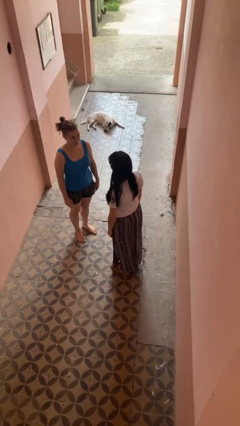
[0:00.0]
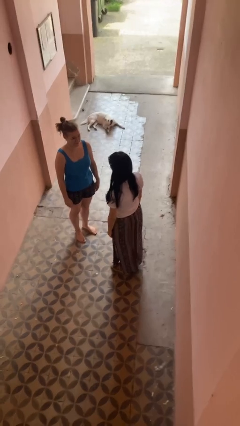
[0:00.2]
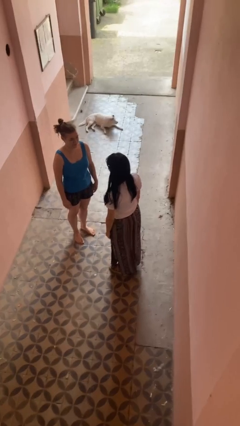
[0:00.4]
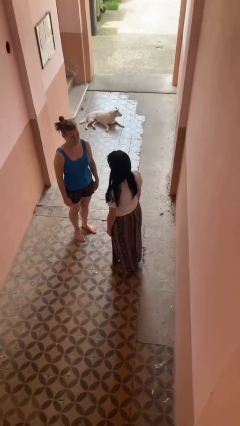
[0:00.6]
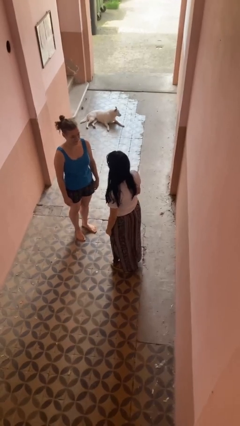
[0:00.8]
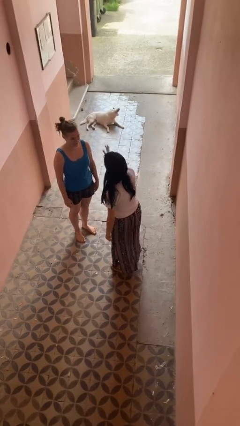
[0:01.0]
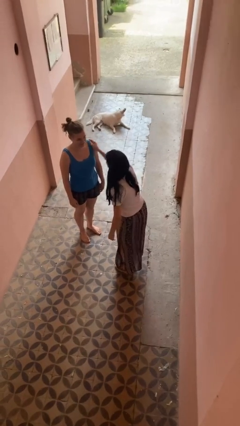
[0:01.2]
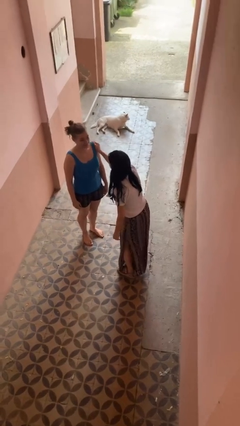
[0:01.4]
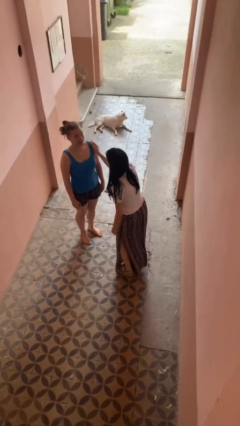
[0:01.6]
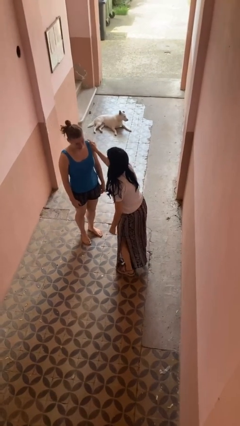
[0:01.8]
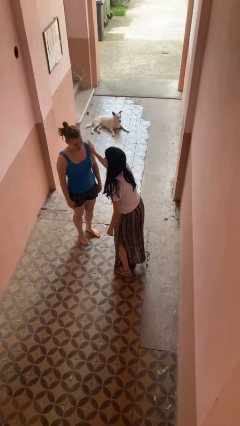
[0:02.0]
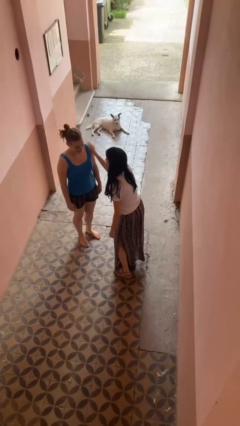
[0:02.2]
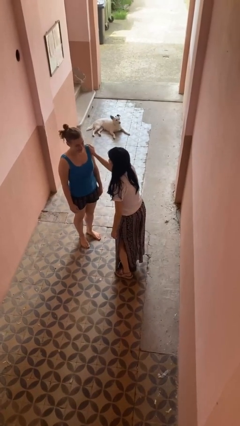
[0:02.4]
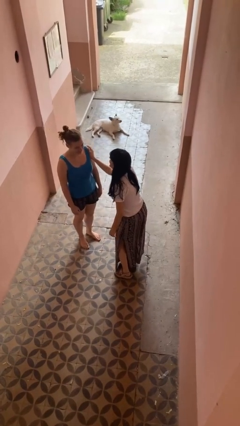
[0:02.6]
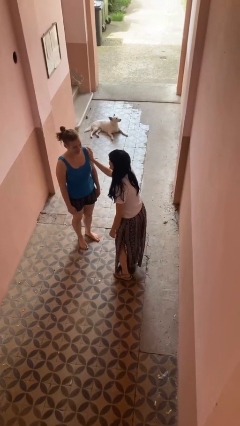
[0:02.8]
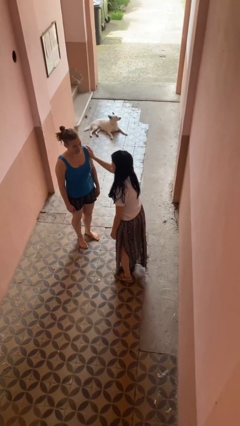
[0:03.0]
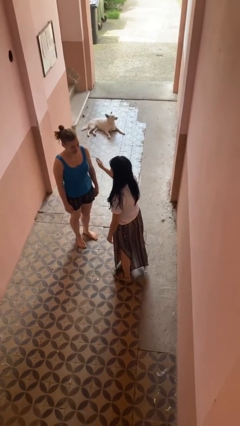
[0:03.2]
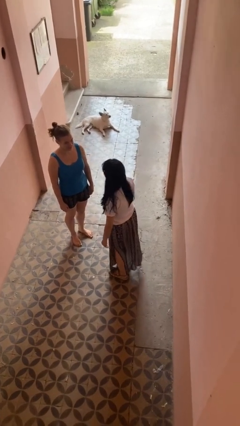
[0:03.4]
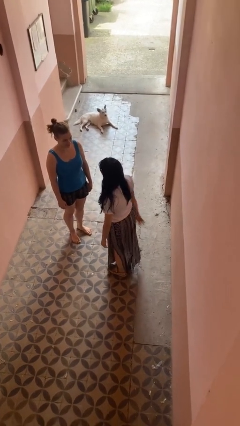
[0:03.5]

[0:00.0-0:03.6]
person pounds shoulders of person

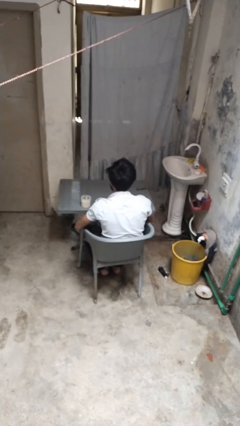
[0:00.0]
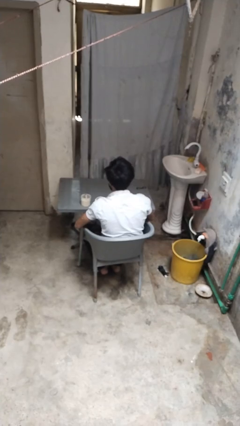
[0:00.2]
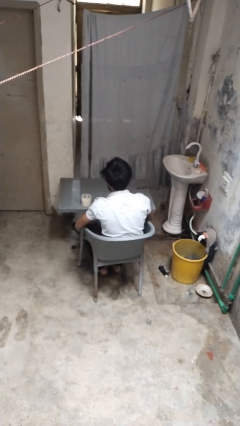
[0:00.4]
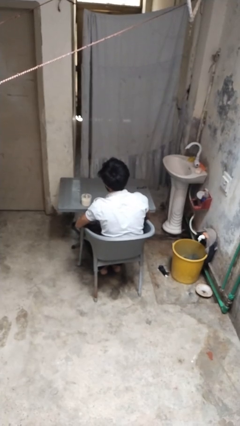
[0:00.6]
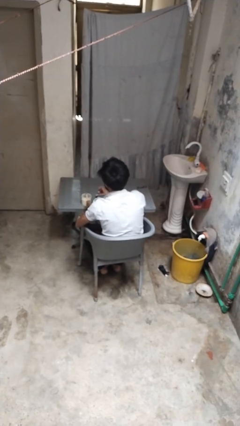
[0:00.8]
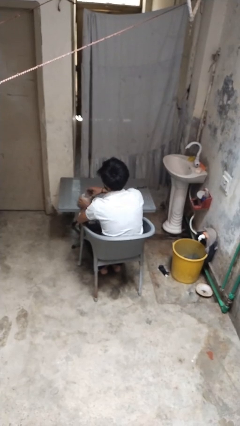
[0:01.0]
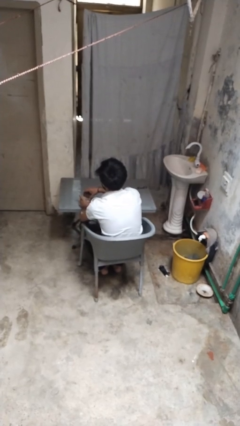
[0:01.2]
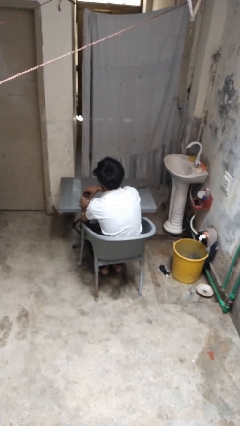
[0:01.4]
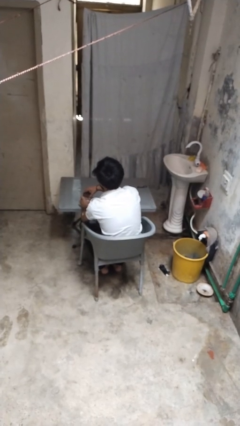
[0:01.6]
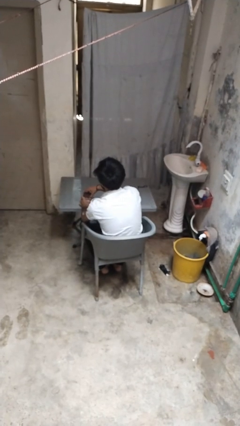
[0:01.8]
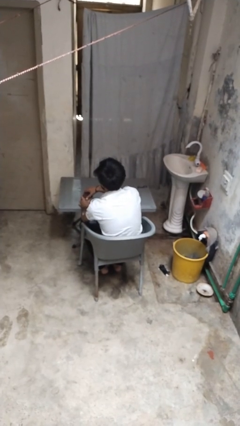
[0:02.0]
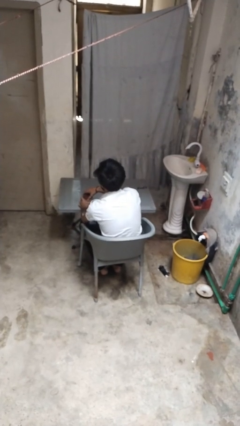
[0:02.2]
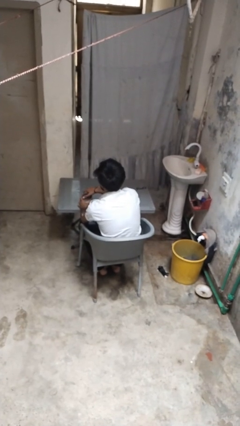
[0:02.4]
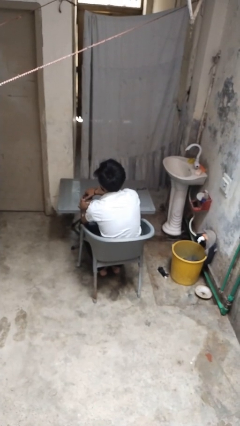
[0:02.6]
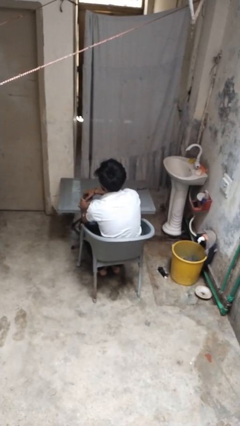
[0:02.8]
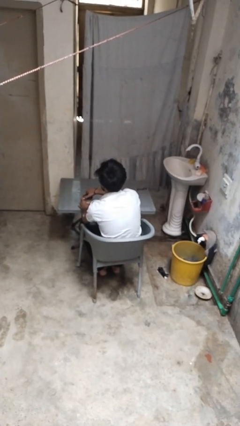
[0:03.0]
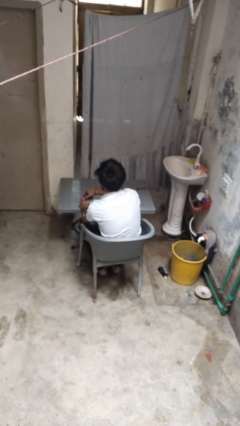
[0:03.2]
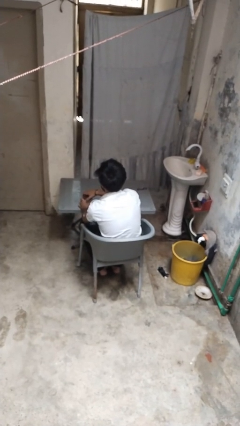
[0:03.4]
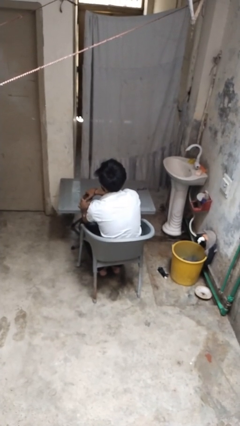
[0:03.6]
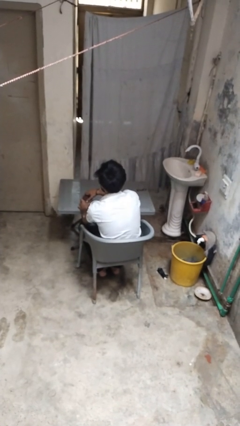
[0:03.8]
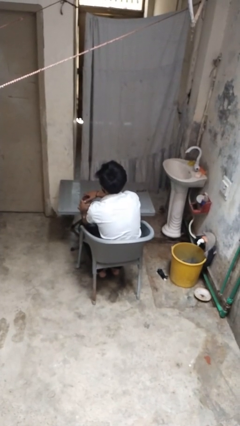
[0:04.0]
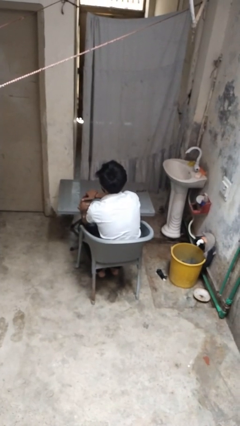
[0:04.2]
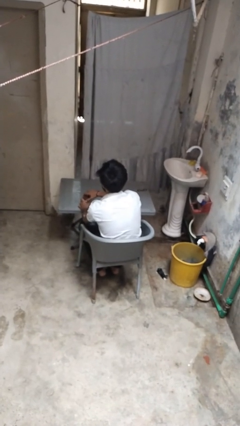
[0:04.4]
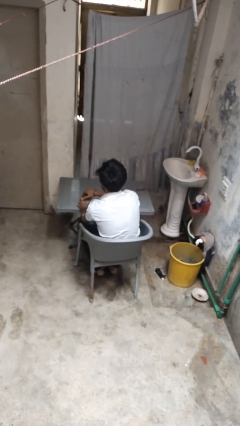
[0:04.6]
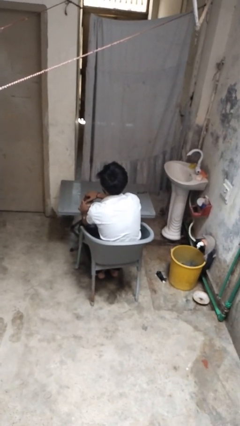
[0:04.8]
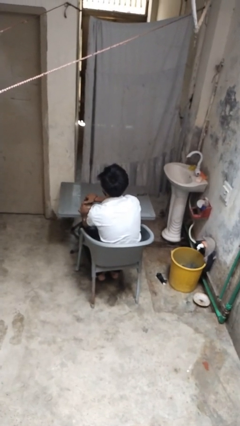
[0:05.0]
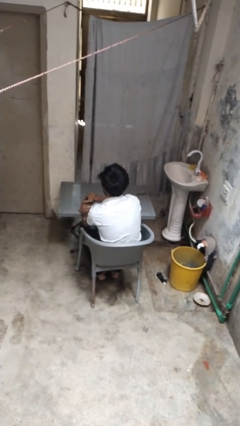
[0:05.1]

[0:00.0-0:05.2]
person closes jar

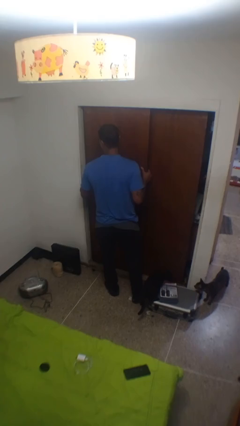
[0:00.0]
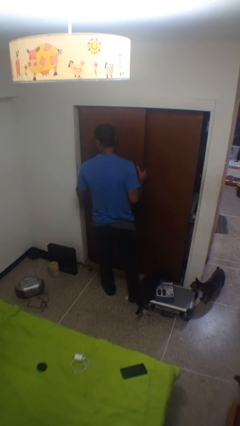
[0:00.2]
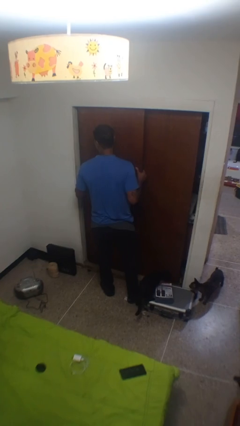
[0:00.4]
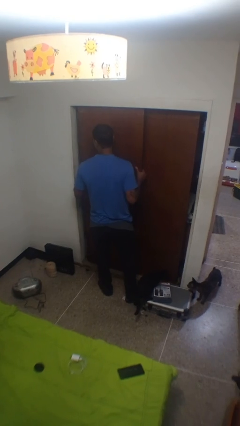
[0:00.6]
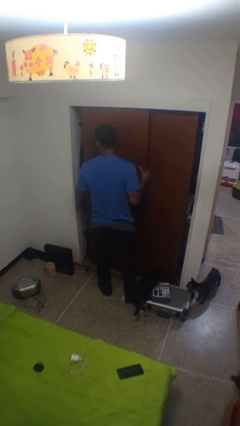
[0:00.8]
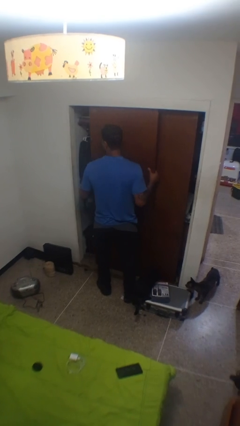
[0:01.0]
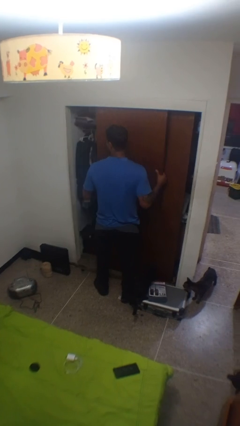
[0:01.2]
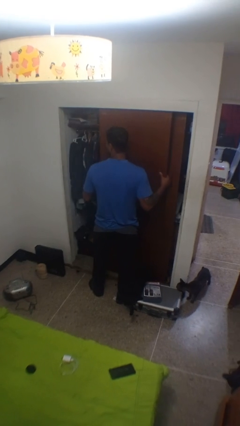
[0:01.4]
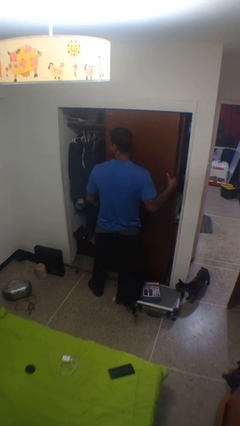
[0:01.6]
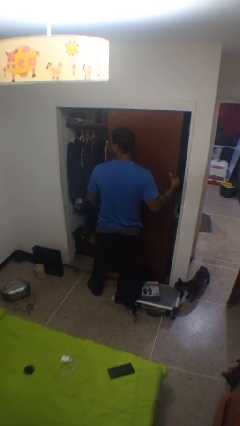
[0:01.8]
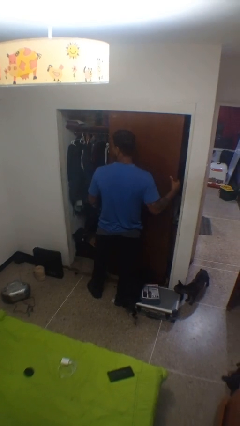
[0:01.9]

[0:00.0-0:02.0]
person opens closet door

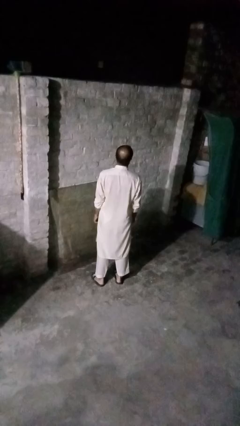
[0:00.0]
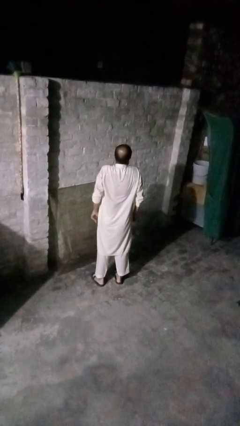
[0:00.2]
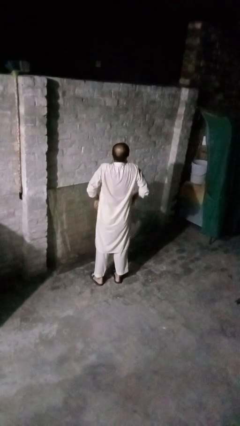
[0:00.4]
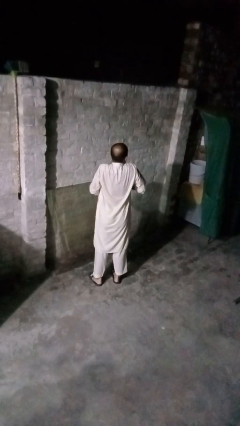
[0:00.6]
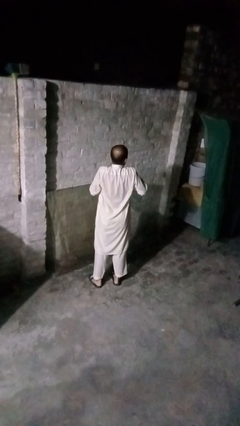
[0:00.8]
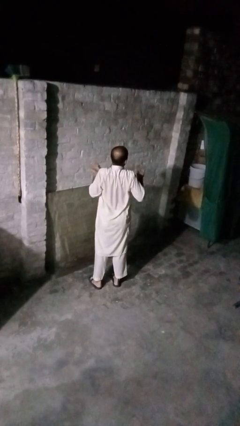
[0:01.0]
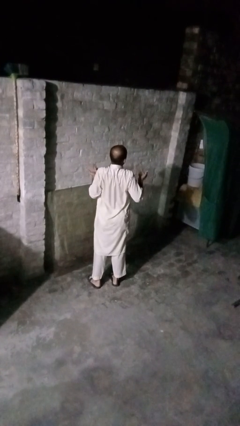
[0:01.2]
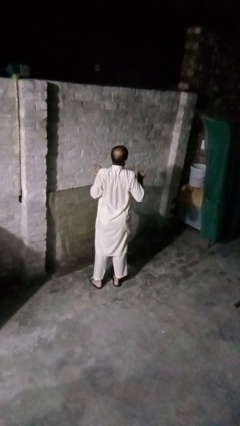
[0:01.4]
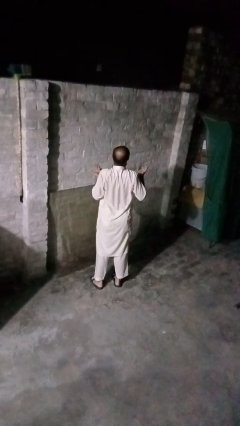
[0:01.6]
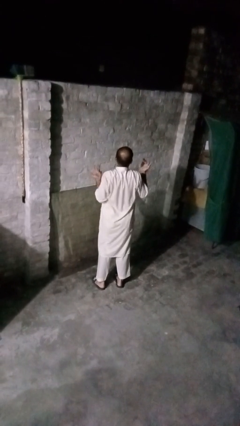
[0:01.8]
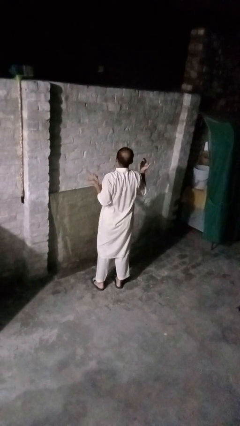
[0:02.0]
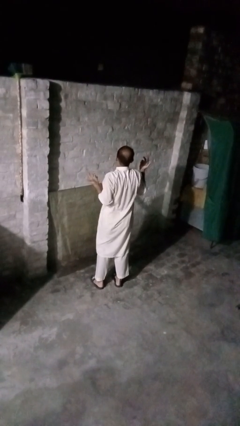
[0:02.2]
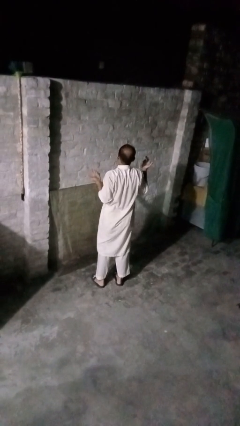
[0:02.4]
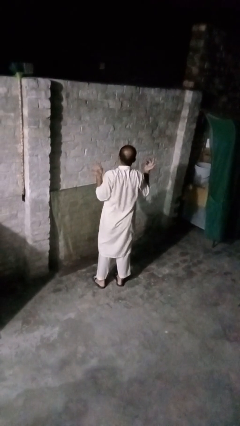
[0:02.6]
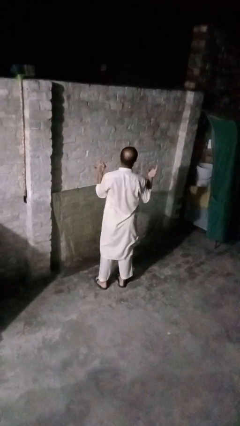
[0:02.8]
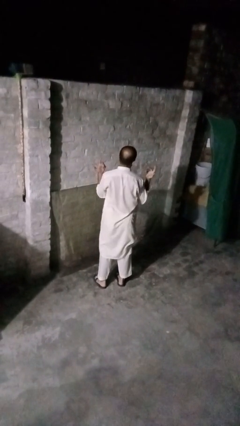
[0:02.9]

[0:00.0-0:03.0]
person shrugs

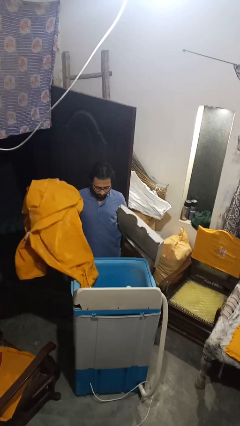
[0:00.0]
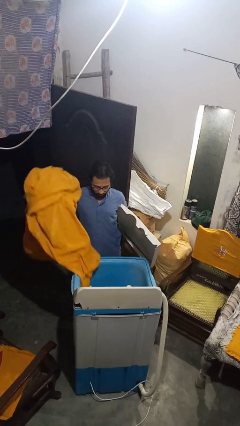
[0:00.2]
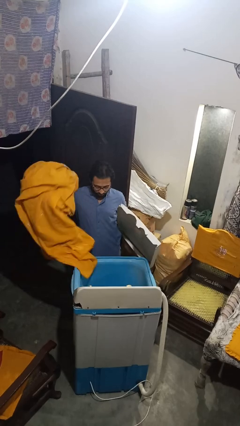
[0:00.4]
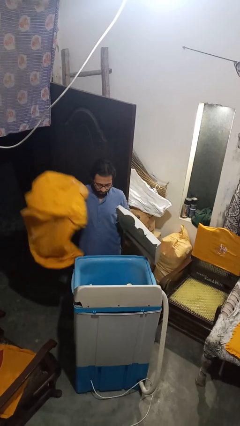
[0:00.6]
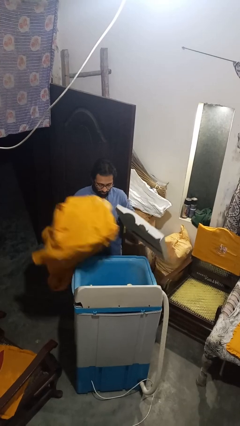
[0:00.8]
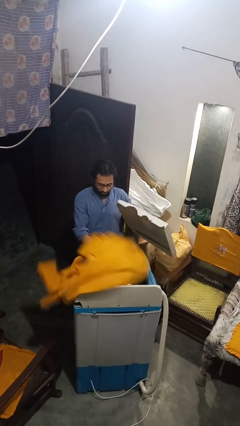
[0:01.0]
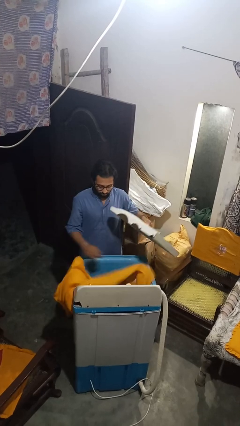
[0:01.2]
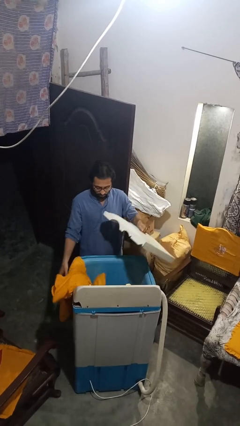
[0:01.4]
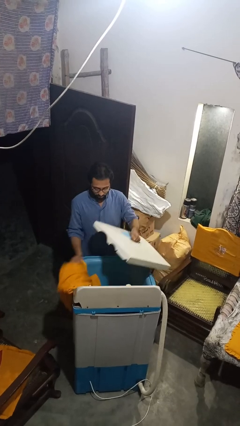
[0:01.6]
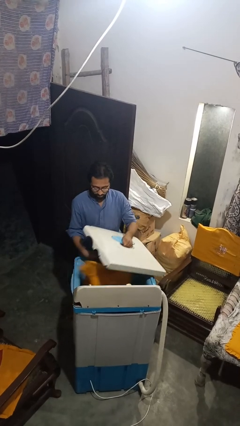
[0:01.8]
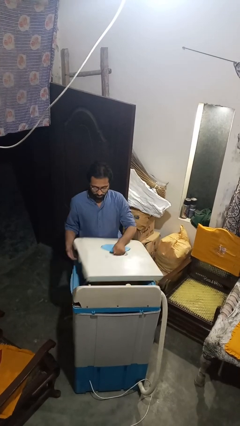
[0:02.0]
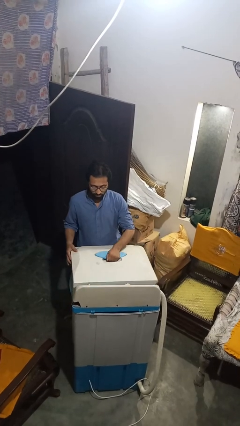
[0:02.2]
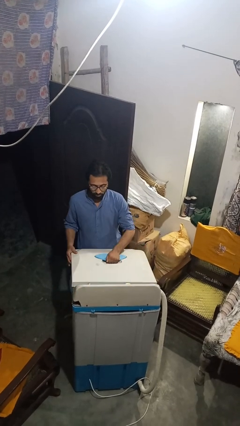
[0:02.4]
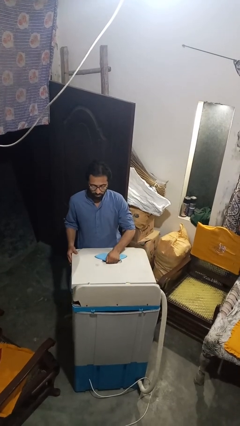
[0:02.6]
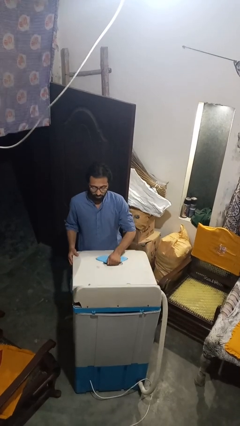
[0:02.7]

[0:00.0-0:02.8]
person closes clothes washer

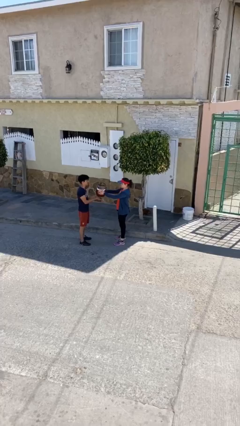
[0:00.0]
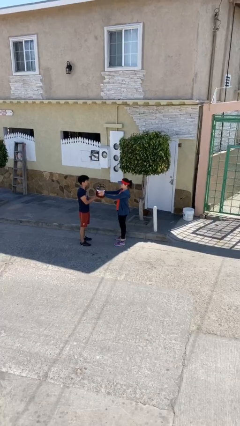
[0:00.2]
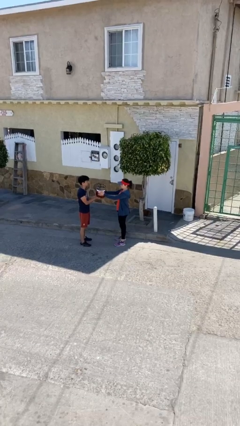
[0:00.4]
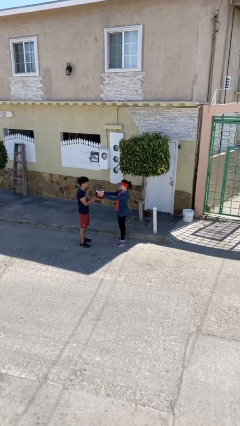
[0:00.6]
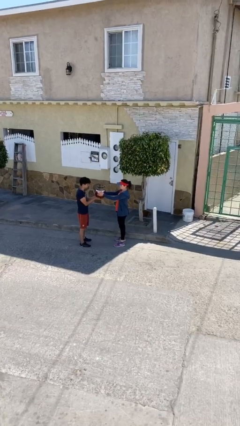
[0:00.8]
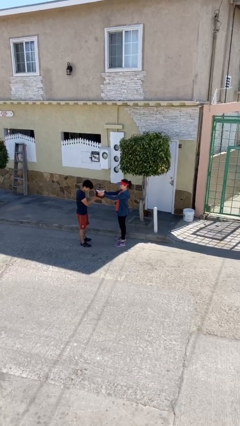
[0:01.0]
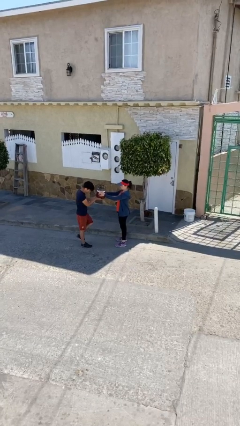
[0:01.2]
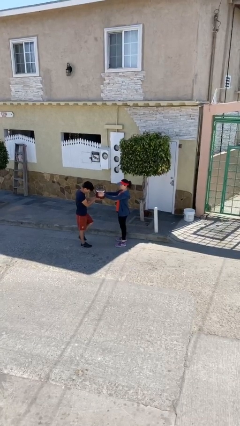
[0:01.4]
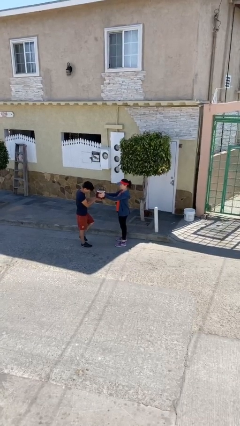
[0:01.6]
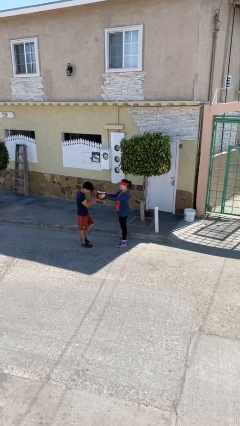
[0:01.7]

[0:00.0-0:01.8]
person transfers object to person
